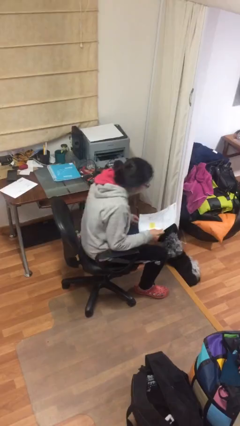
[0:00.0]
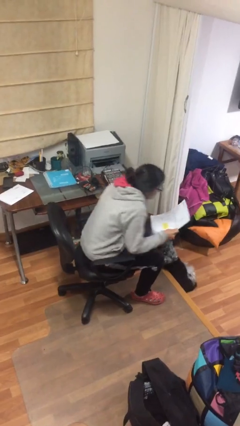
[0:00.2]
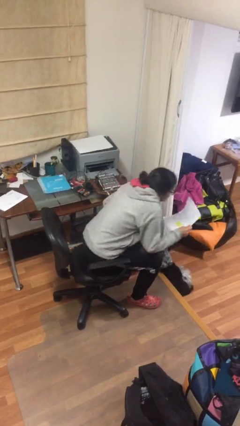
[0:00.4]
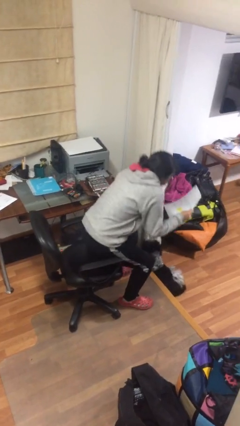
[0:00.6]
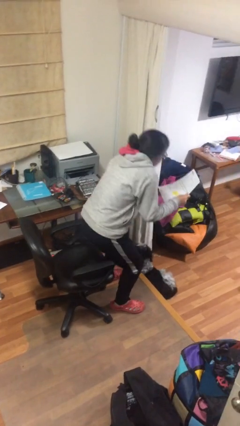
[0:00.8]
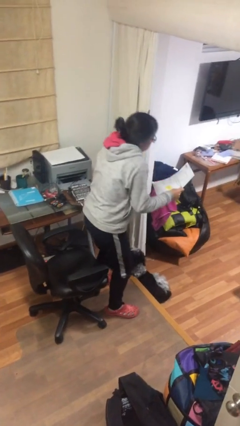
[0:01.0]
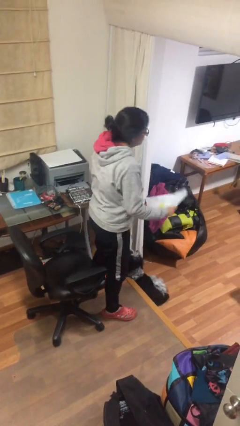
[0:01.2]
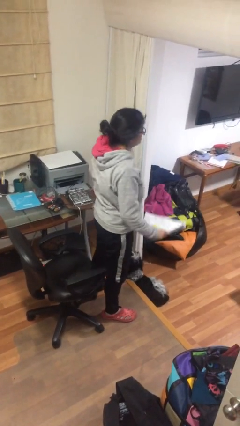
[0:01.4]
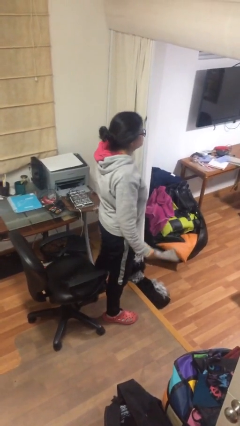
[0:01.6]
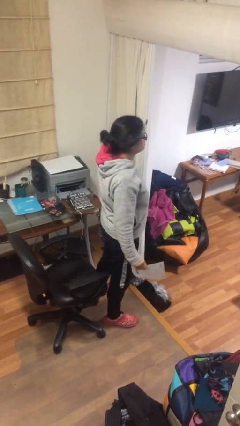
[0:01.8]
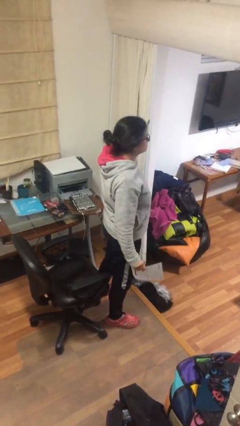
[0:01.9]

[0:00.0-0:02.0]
person stands up

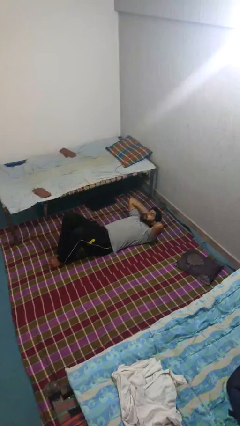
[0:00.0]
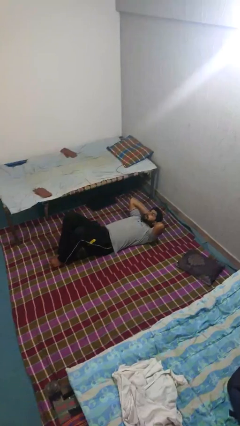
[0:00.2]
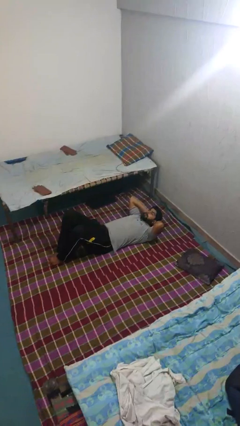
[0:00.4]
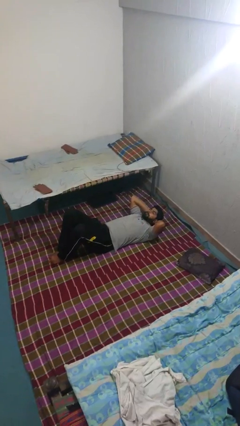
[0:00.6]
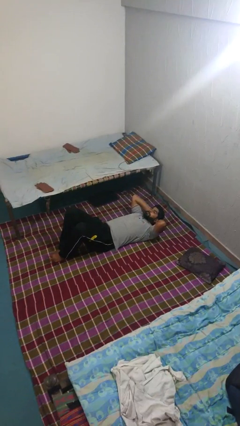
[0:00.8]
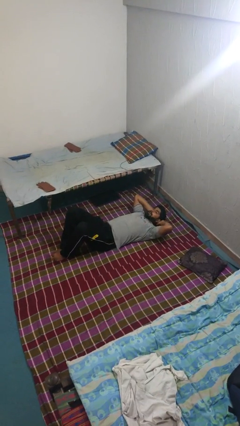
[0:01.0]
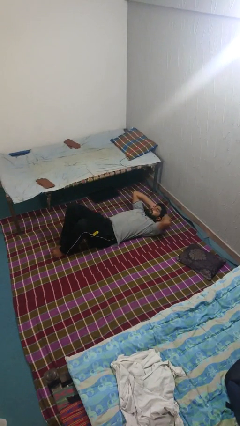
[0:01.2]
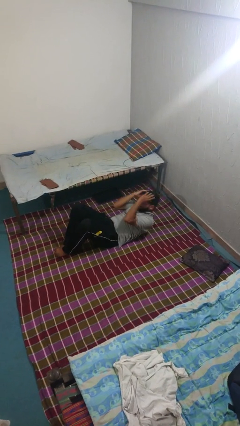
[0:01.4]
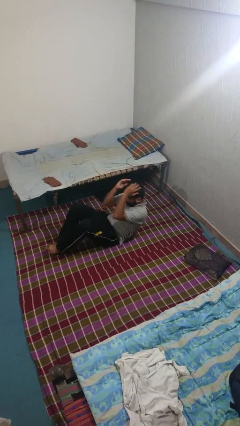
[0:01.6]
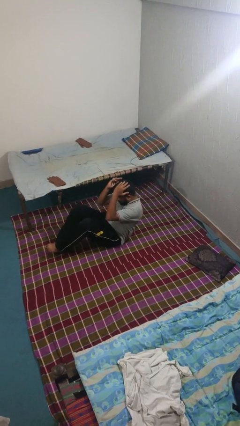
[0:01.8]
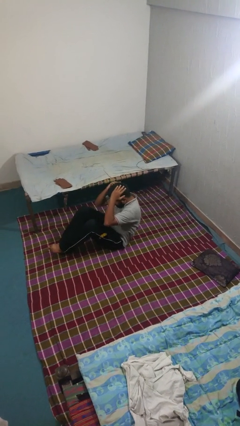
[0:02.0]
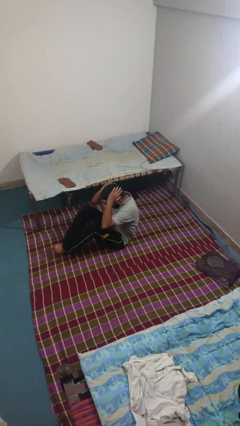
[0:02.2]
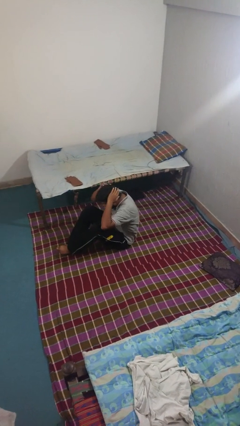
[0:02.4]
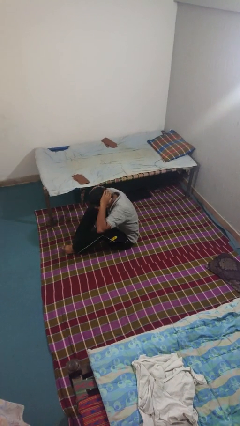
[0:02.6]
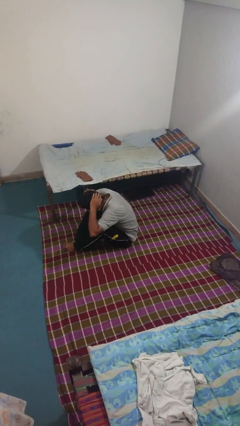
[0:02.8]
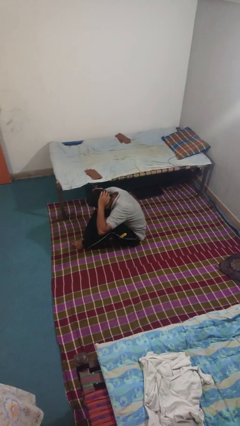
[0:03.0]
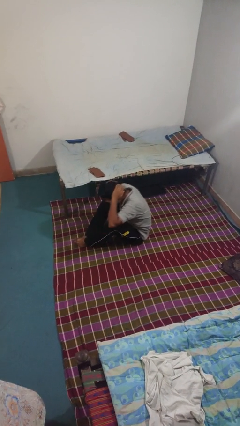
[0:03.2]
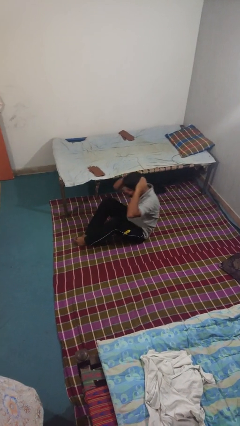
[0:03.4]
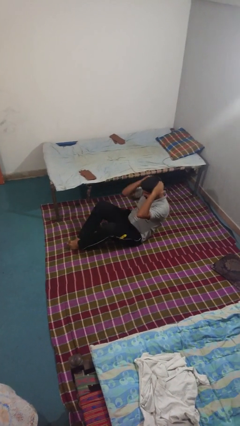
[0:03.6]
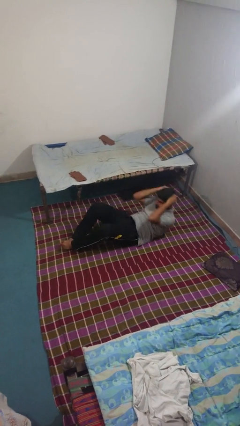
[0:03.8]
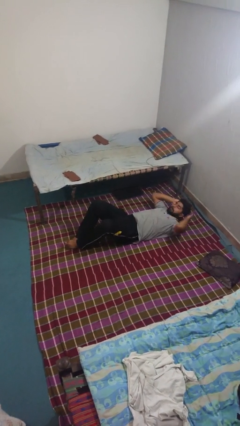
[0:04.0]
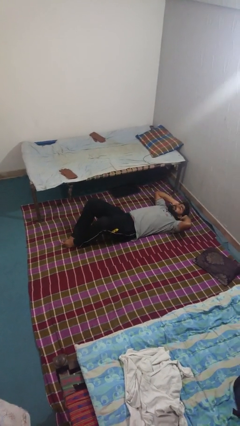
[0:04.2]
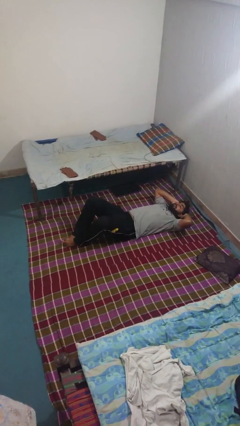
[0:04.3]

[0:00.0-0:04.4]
person exercises with situp

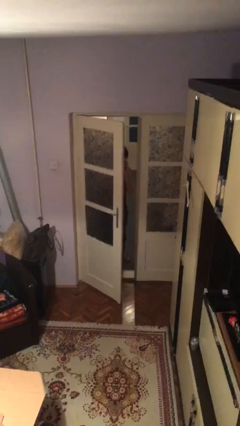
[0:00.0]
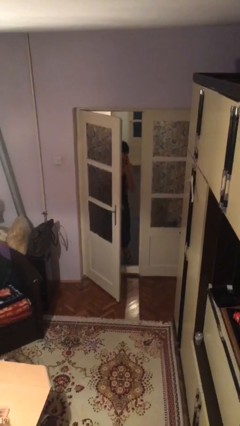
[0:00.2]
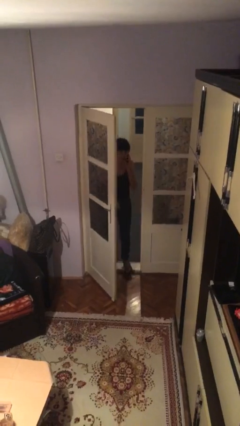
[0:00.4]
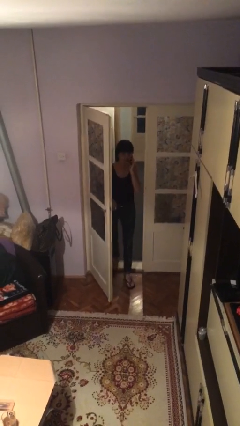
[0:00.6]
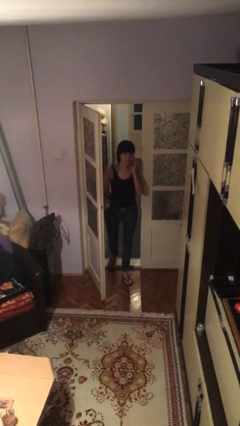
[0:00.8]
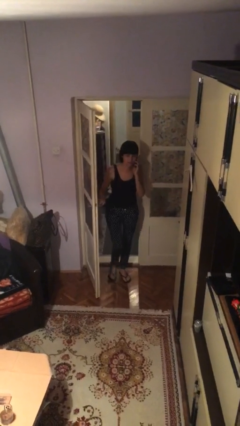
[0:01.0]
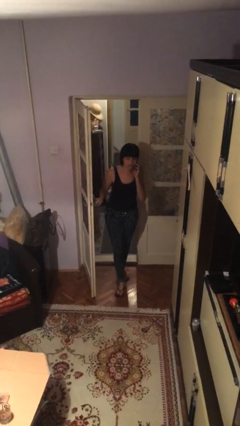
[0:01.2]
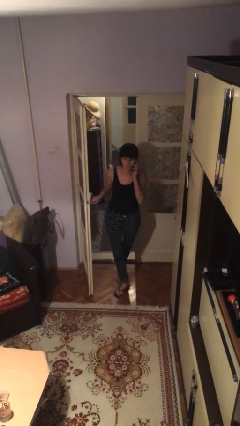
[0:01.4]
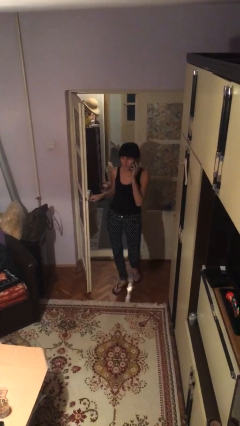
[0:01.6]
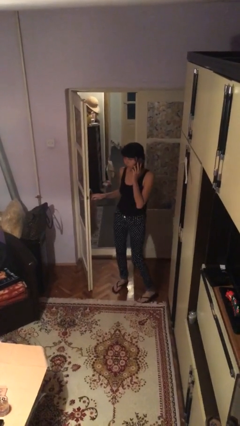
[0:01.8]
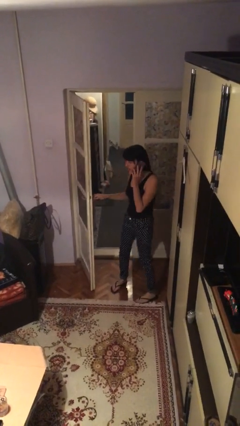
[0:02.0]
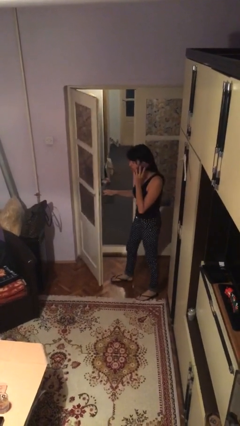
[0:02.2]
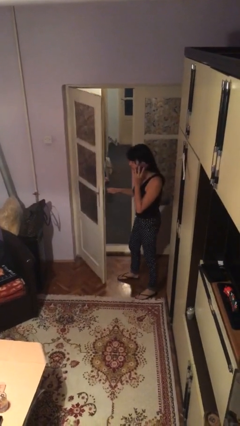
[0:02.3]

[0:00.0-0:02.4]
person enters scene through structure

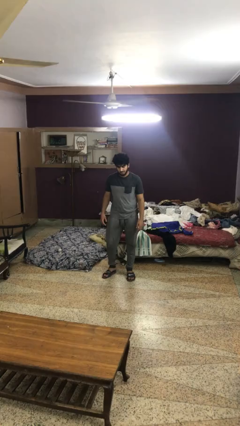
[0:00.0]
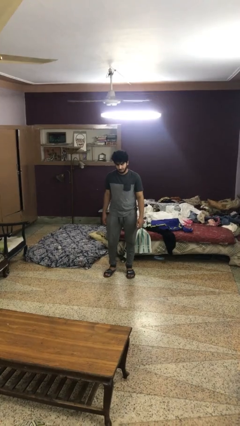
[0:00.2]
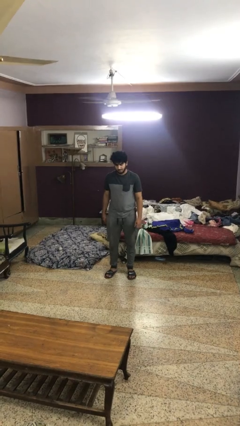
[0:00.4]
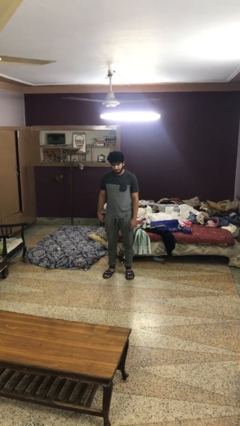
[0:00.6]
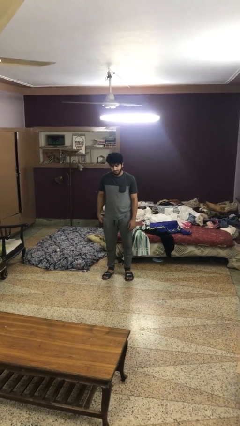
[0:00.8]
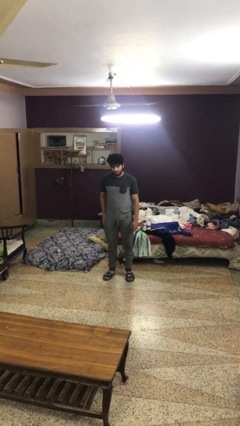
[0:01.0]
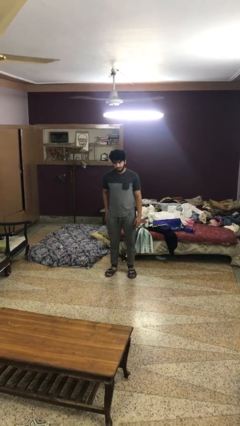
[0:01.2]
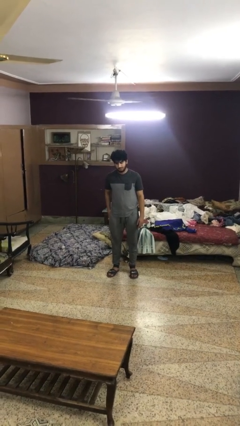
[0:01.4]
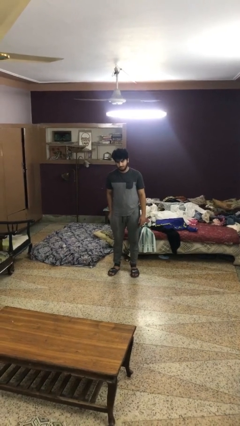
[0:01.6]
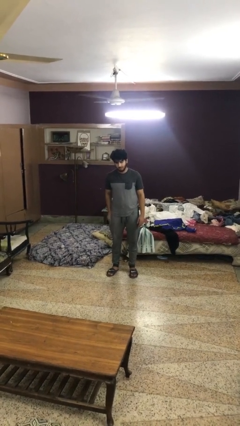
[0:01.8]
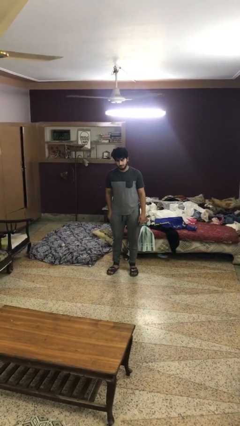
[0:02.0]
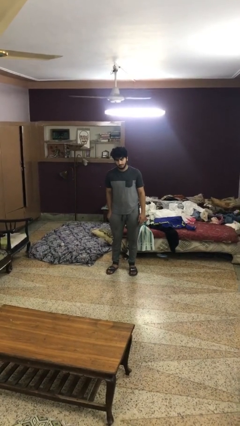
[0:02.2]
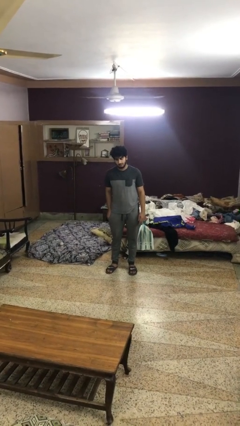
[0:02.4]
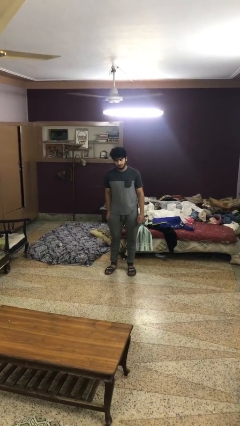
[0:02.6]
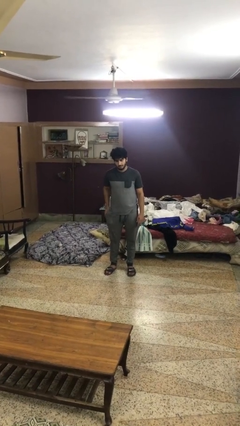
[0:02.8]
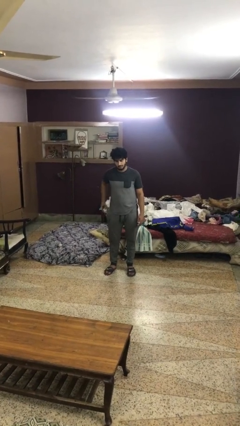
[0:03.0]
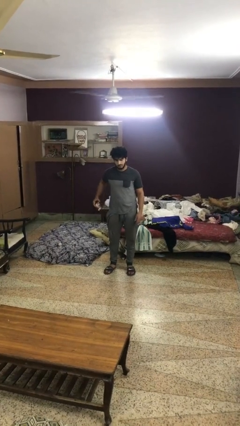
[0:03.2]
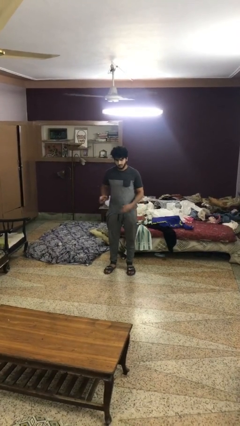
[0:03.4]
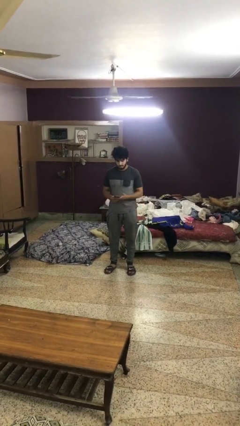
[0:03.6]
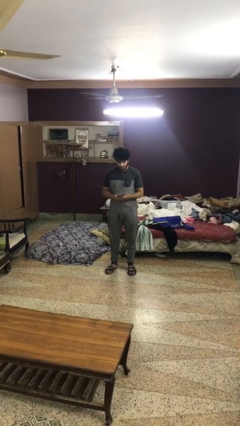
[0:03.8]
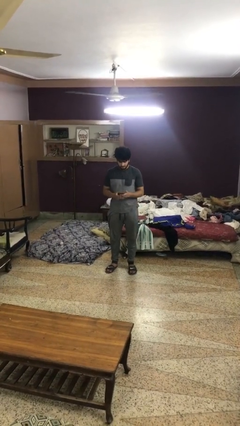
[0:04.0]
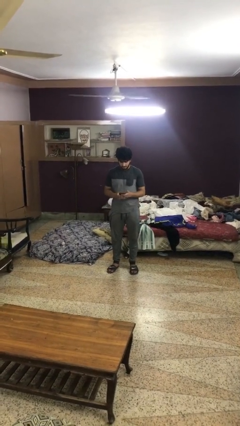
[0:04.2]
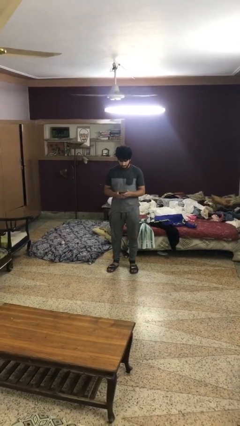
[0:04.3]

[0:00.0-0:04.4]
person takes phone from pocket

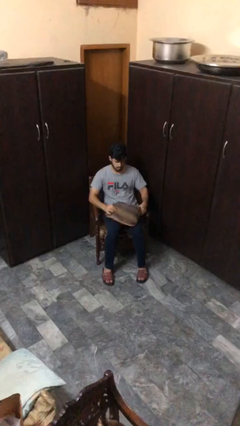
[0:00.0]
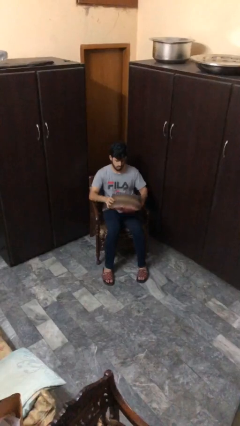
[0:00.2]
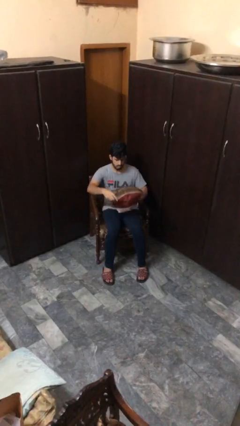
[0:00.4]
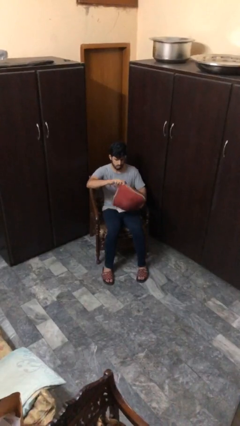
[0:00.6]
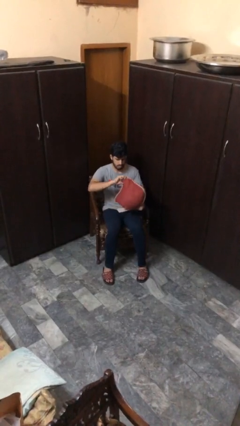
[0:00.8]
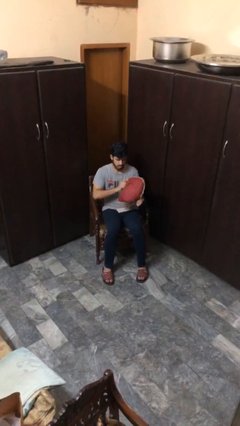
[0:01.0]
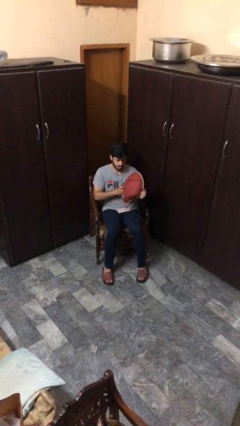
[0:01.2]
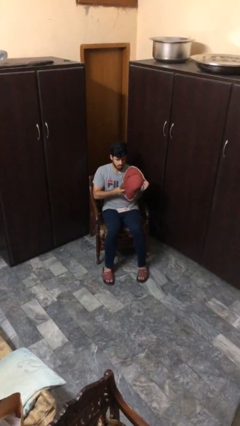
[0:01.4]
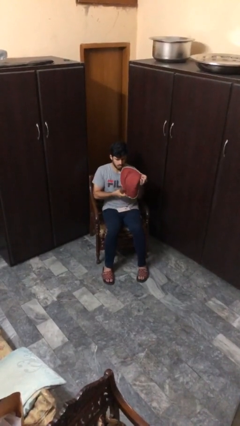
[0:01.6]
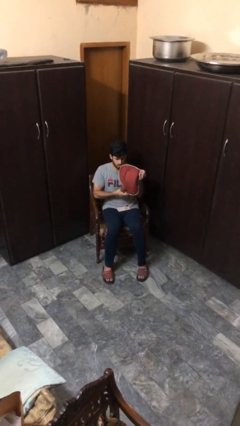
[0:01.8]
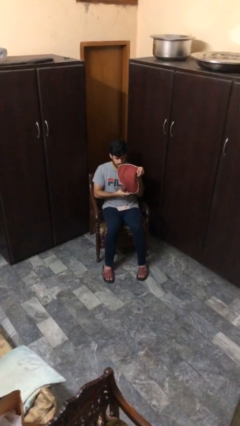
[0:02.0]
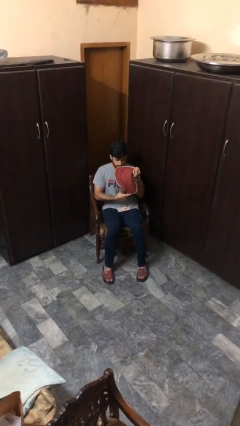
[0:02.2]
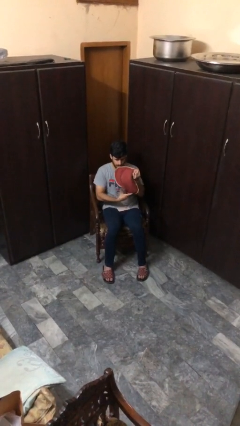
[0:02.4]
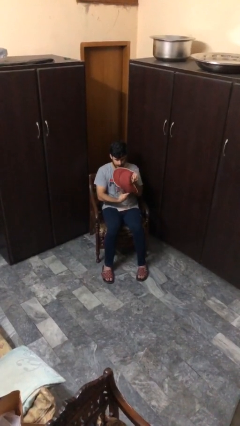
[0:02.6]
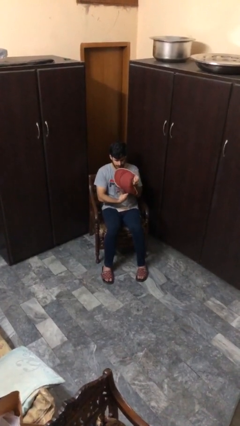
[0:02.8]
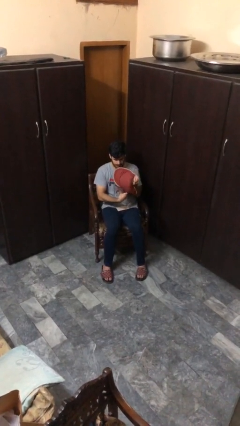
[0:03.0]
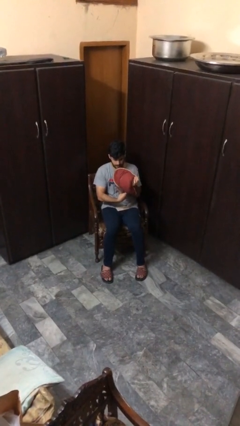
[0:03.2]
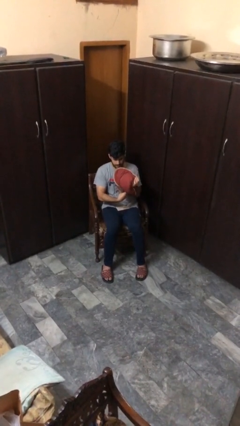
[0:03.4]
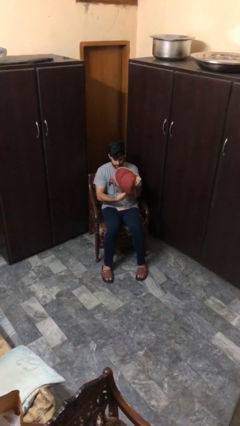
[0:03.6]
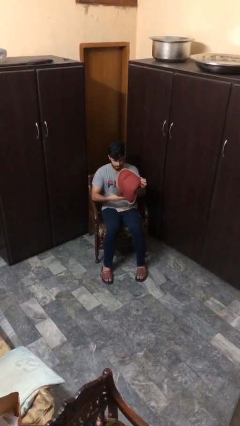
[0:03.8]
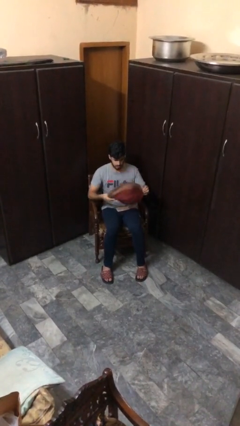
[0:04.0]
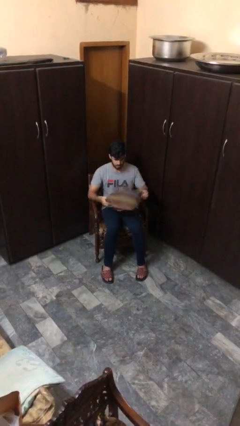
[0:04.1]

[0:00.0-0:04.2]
person squeezes object
